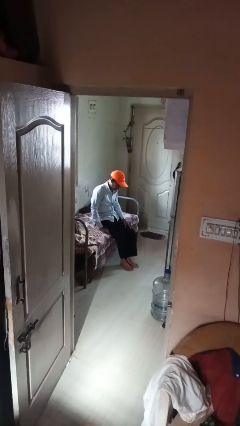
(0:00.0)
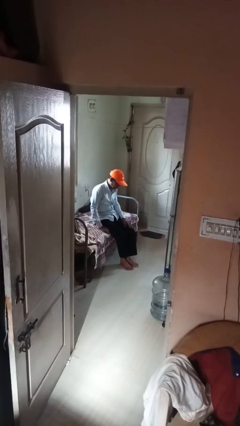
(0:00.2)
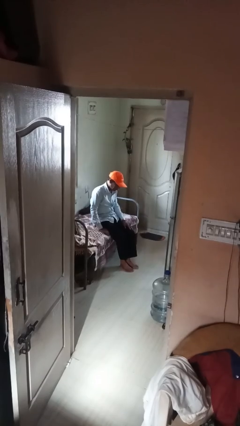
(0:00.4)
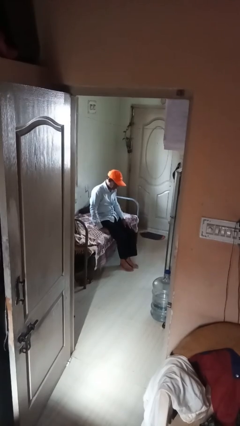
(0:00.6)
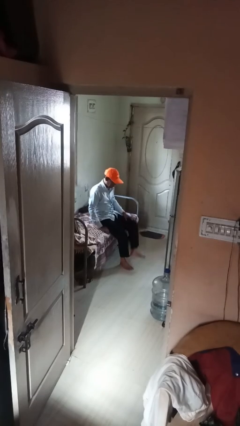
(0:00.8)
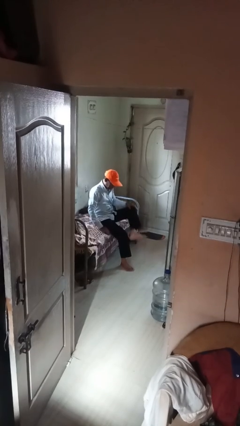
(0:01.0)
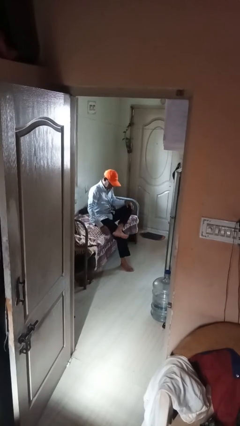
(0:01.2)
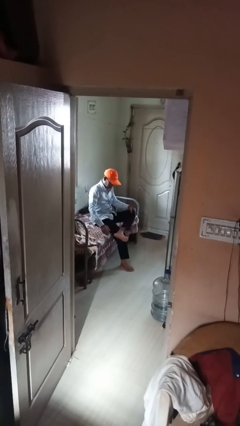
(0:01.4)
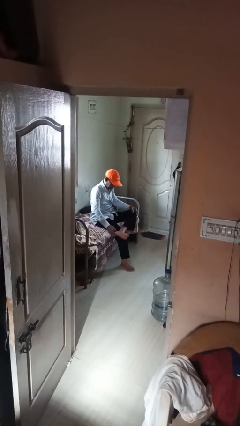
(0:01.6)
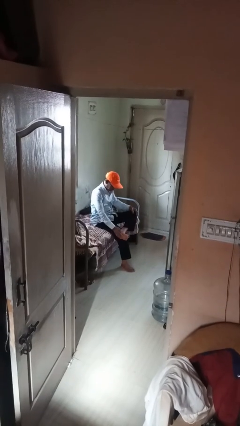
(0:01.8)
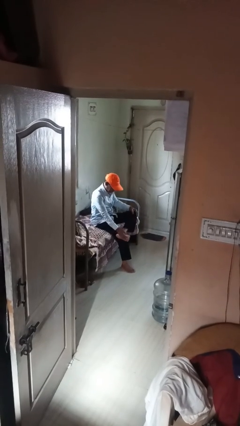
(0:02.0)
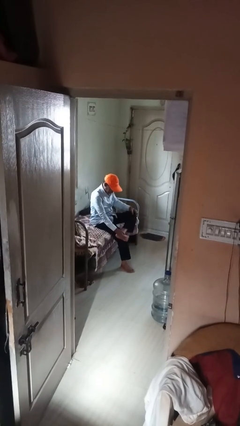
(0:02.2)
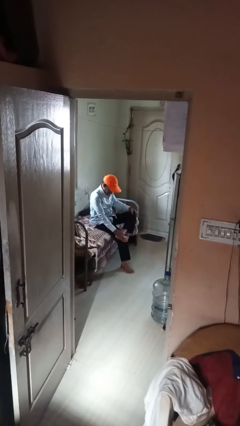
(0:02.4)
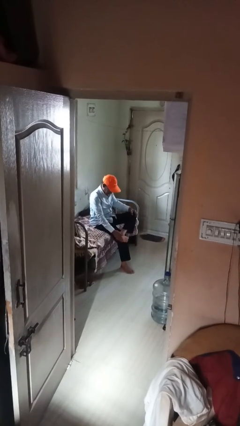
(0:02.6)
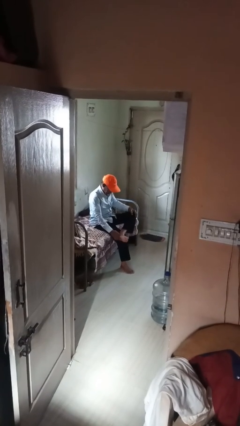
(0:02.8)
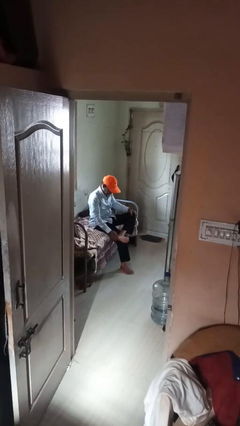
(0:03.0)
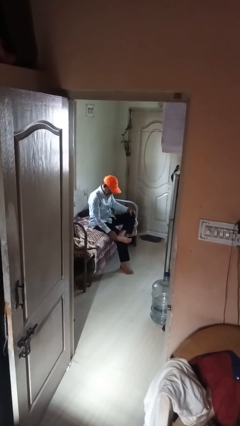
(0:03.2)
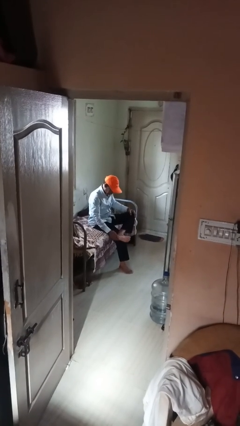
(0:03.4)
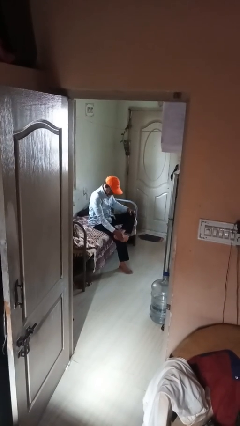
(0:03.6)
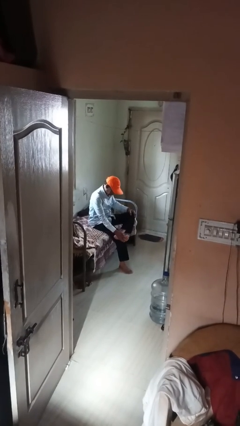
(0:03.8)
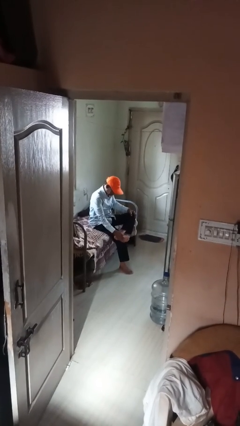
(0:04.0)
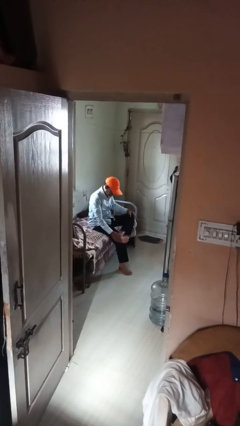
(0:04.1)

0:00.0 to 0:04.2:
person rubs foot

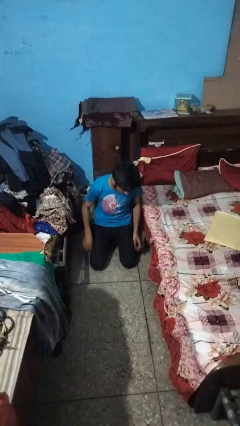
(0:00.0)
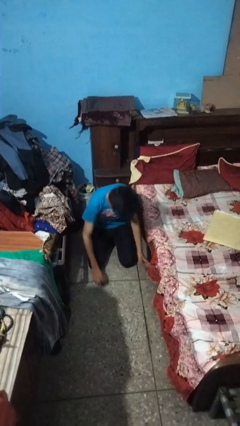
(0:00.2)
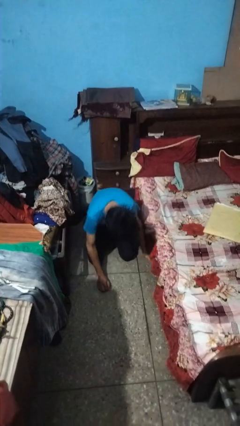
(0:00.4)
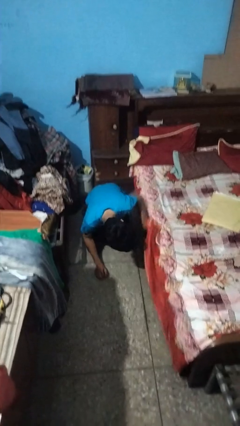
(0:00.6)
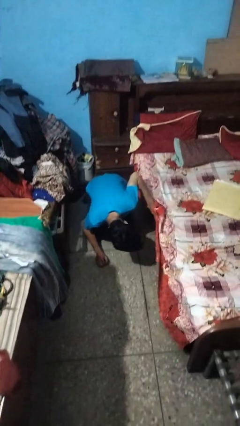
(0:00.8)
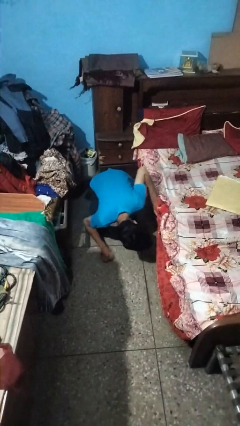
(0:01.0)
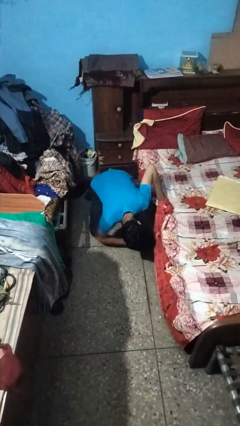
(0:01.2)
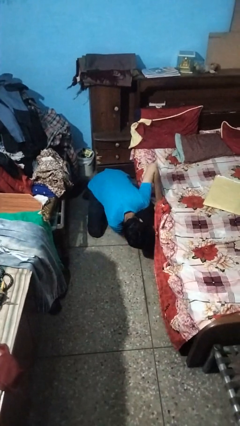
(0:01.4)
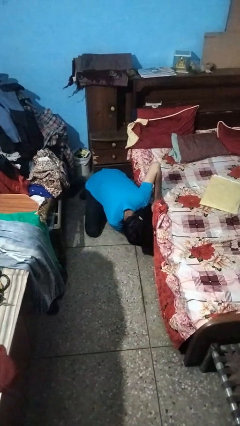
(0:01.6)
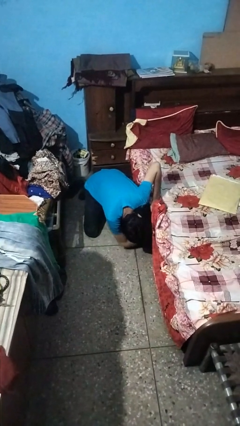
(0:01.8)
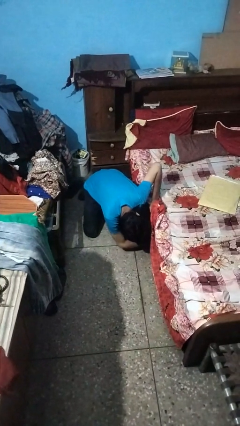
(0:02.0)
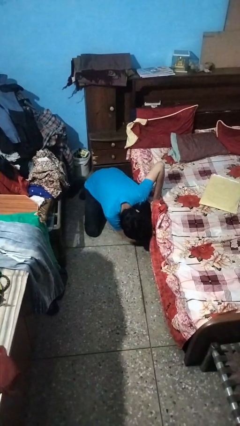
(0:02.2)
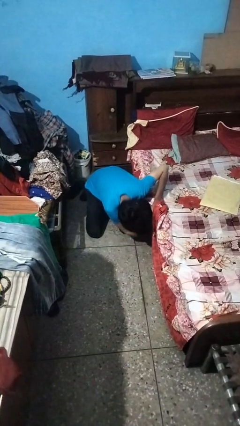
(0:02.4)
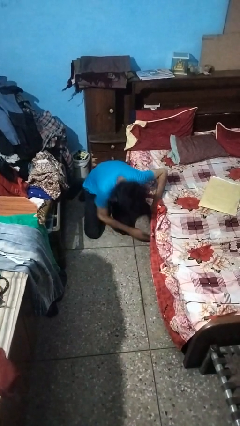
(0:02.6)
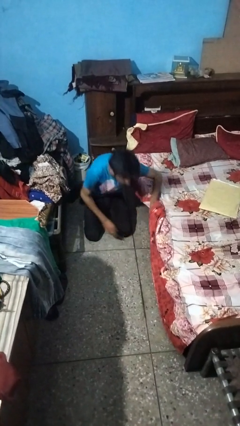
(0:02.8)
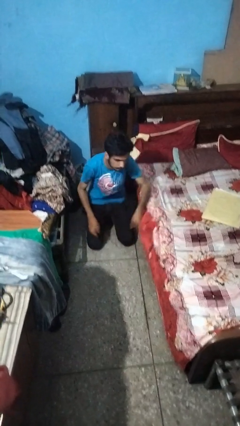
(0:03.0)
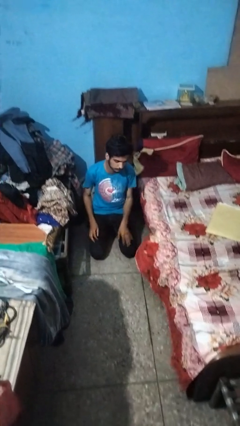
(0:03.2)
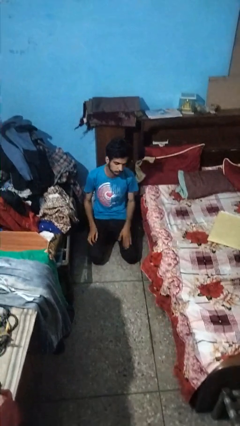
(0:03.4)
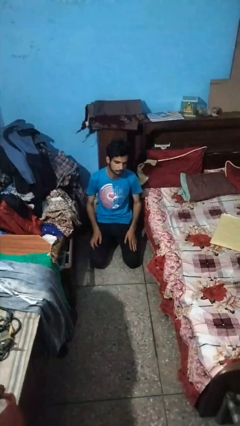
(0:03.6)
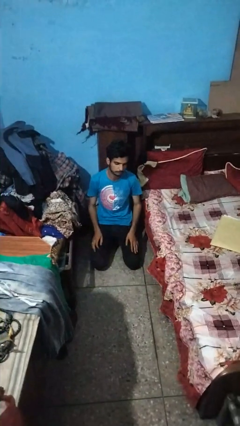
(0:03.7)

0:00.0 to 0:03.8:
person searches under bed

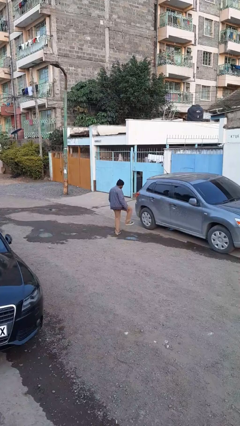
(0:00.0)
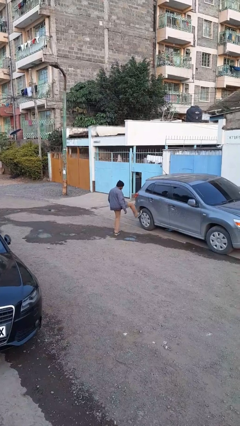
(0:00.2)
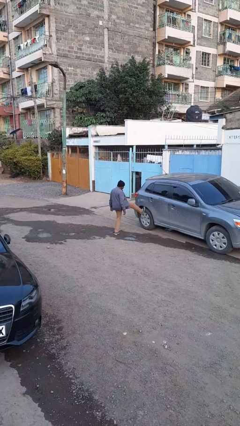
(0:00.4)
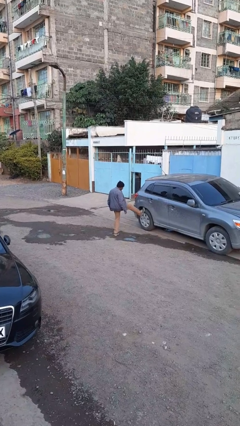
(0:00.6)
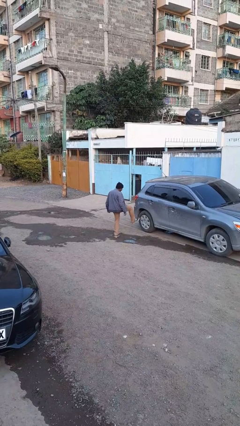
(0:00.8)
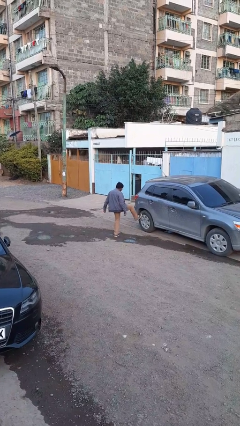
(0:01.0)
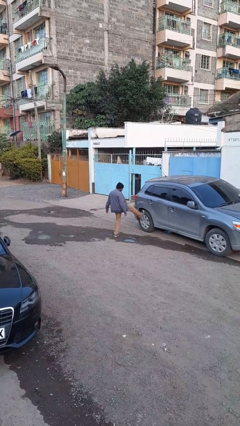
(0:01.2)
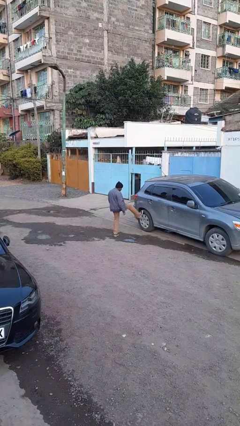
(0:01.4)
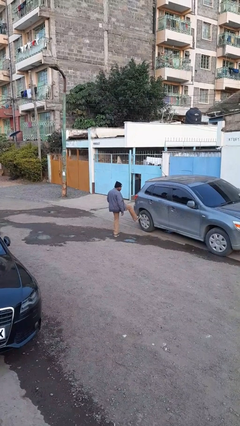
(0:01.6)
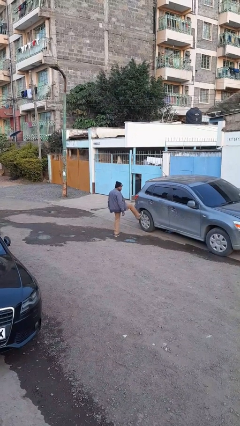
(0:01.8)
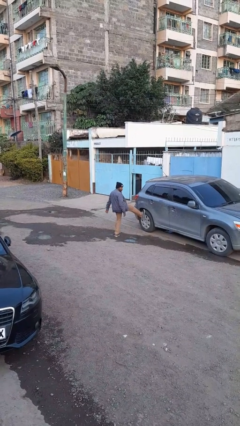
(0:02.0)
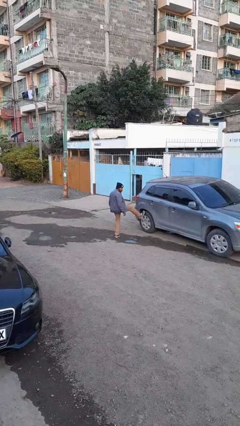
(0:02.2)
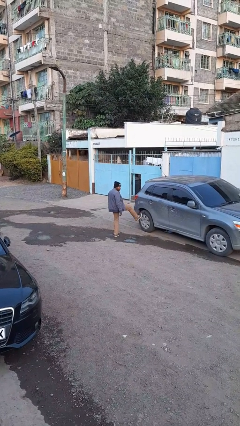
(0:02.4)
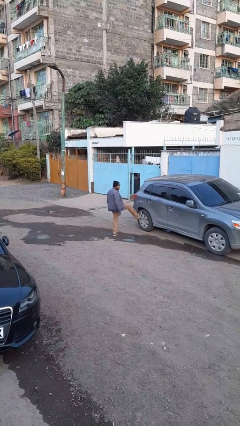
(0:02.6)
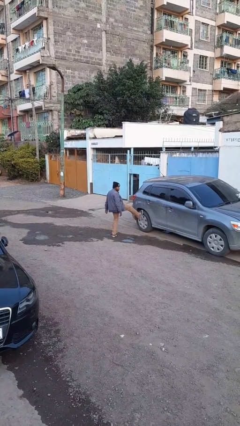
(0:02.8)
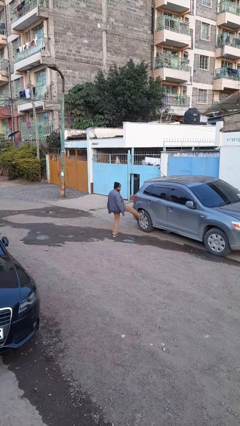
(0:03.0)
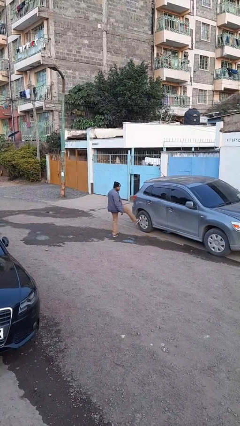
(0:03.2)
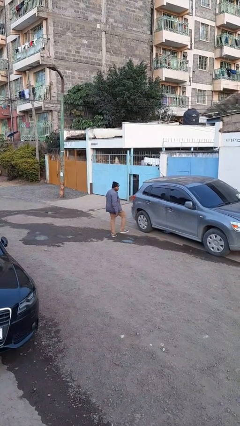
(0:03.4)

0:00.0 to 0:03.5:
person kicks car tires

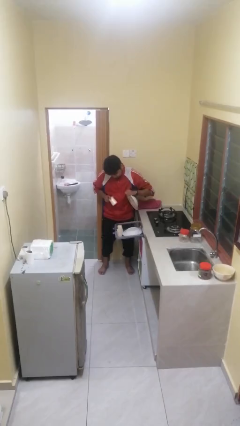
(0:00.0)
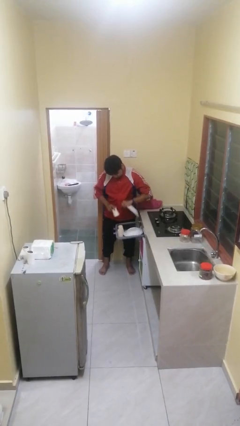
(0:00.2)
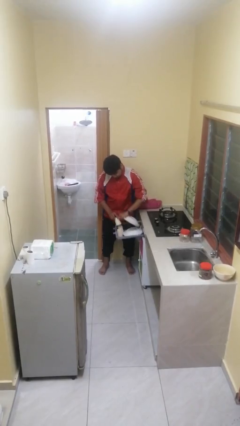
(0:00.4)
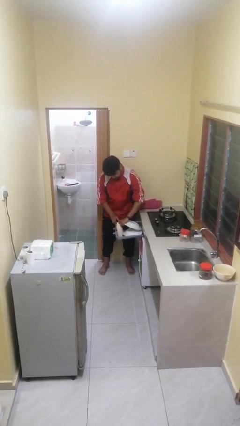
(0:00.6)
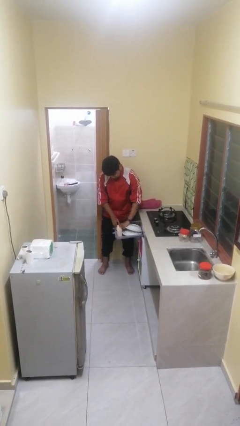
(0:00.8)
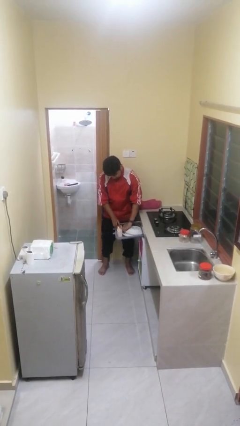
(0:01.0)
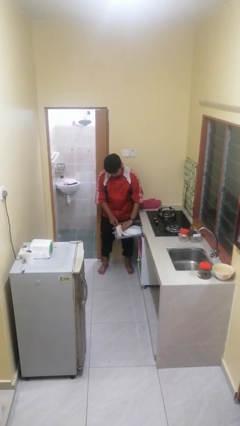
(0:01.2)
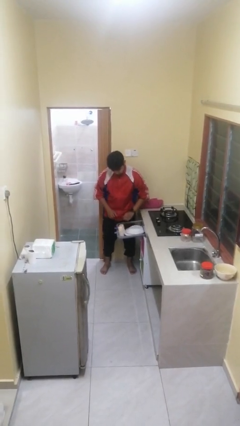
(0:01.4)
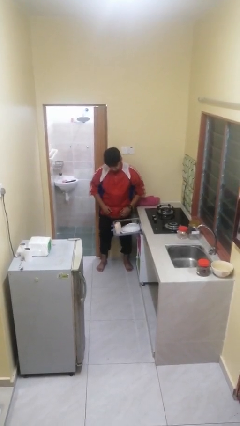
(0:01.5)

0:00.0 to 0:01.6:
person puts object into kitchen drawer

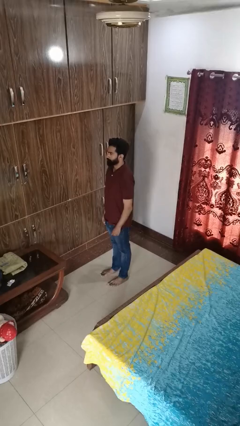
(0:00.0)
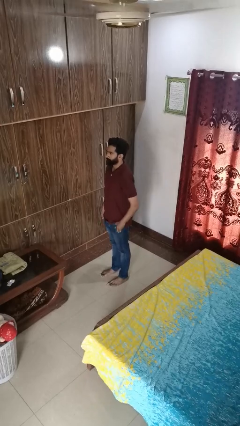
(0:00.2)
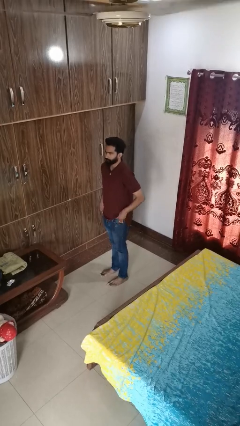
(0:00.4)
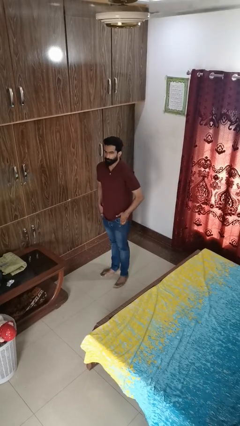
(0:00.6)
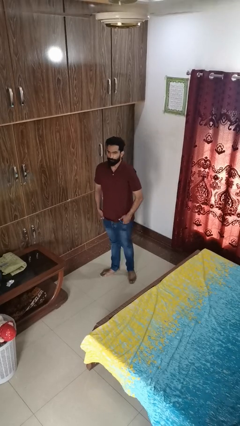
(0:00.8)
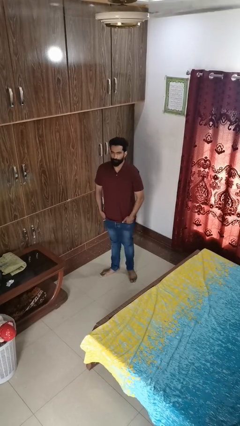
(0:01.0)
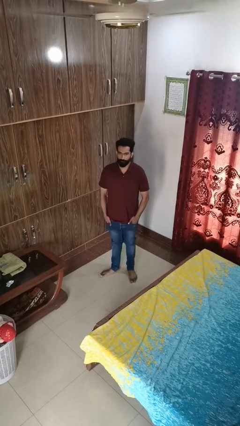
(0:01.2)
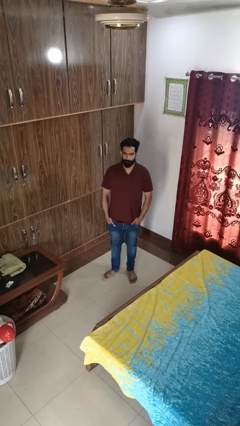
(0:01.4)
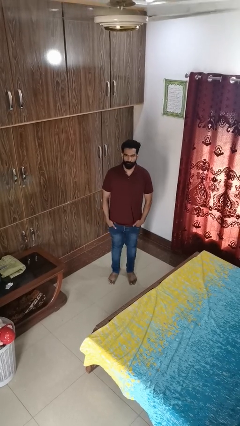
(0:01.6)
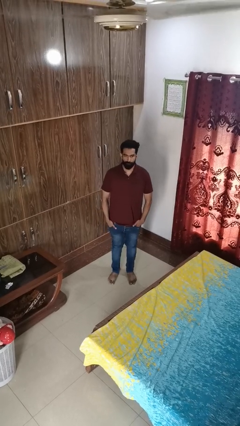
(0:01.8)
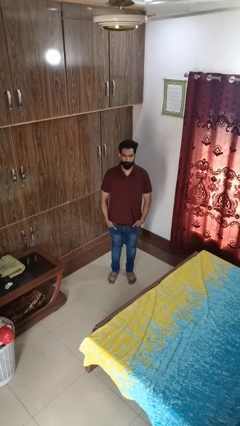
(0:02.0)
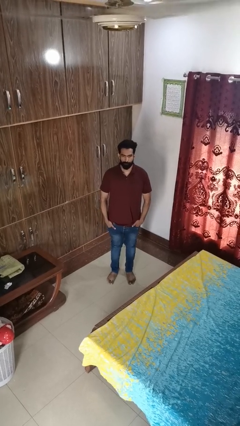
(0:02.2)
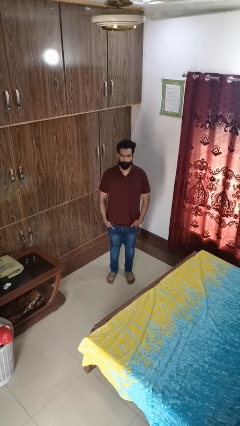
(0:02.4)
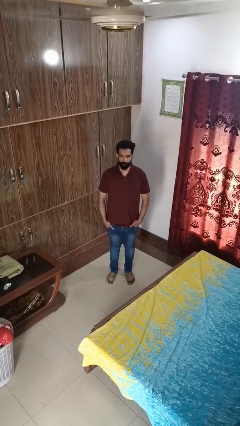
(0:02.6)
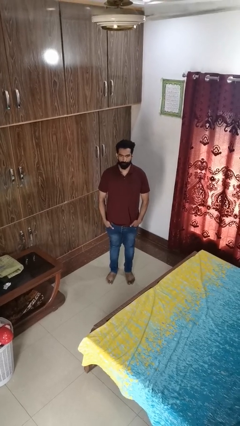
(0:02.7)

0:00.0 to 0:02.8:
person puts hands in back pockets

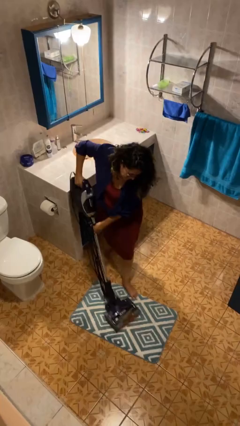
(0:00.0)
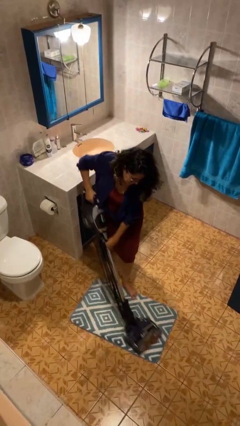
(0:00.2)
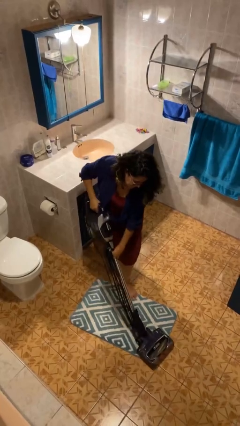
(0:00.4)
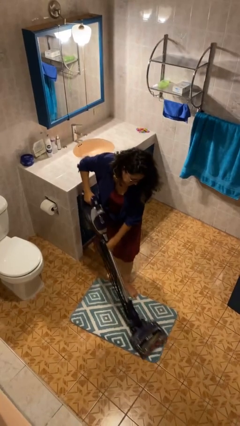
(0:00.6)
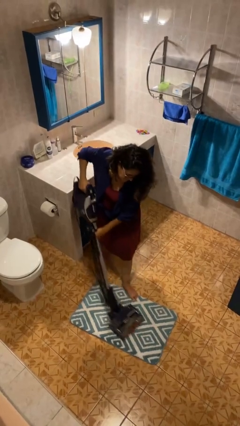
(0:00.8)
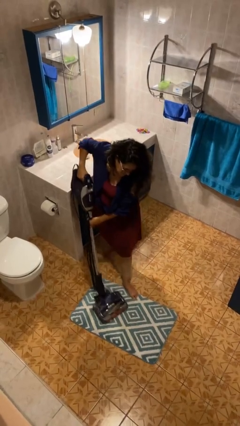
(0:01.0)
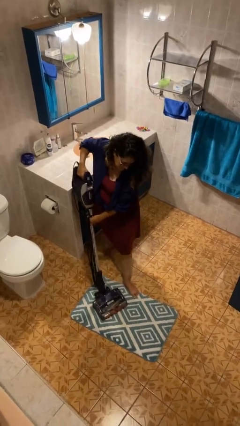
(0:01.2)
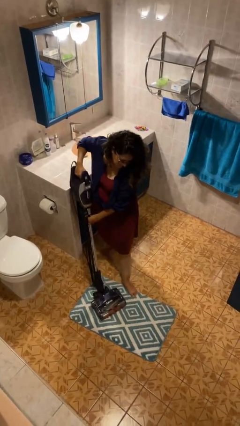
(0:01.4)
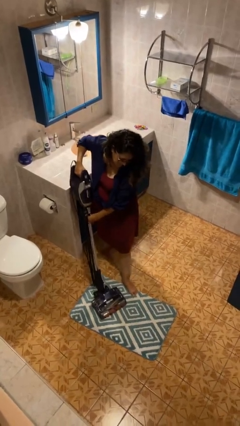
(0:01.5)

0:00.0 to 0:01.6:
person vacuums carpet
